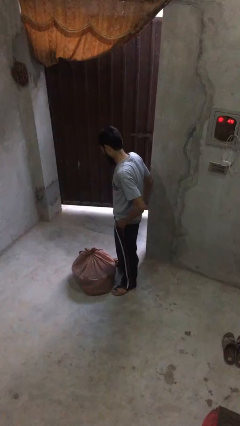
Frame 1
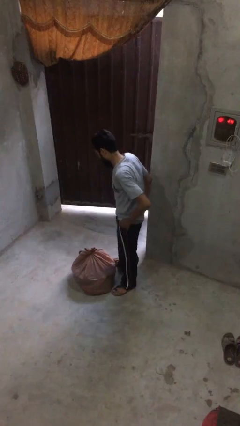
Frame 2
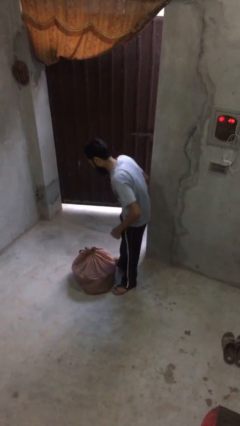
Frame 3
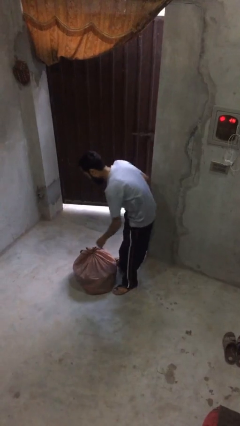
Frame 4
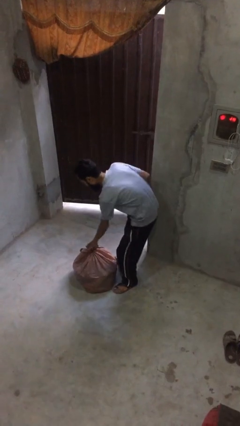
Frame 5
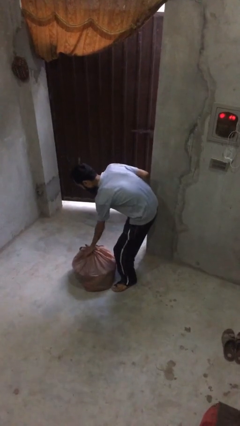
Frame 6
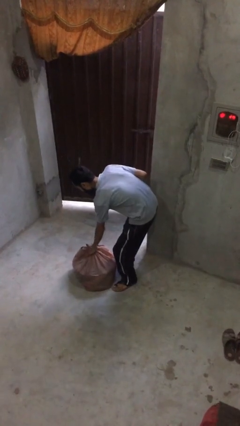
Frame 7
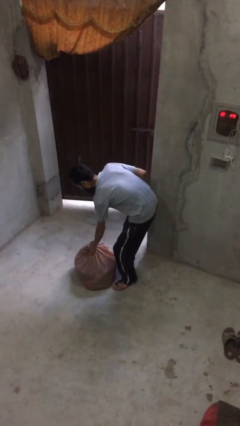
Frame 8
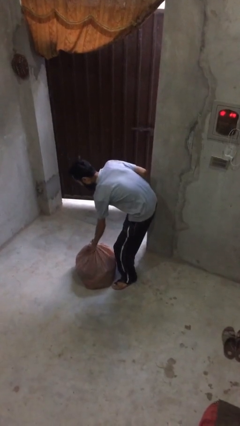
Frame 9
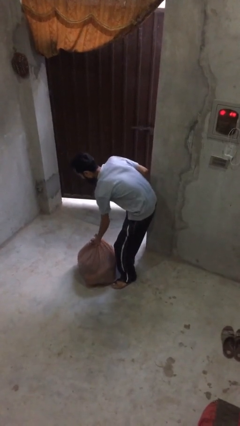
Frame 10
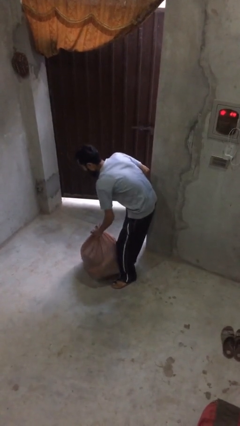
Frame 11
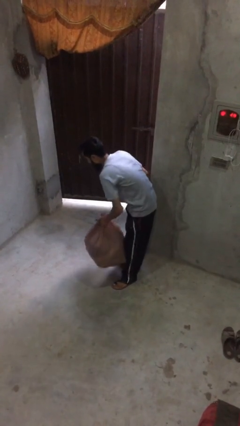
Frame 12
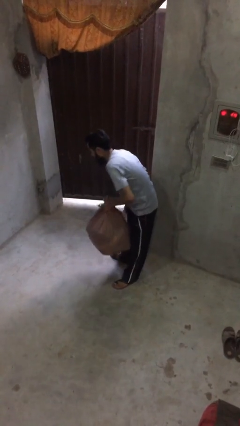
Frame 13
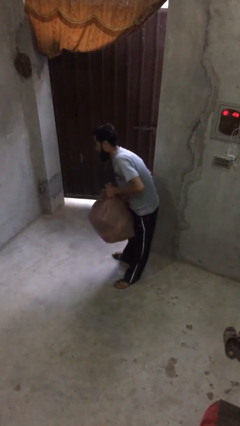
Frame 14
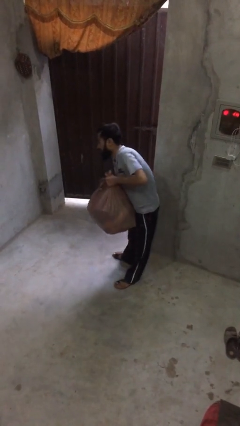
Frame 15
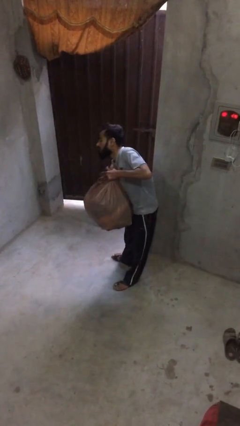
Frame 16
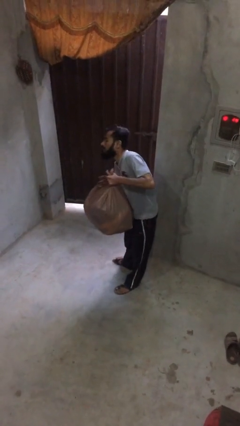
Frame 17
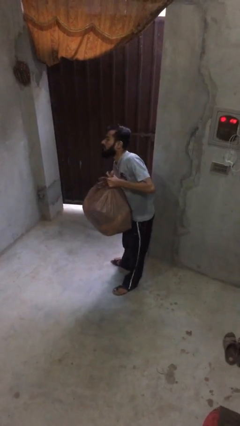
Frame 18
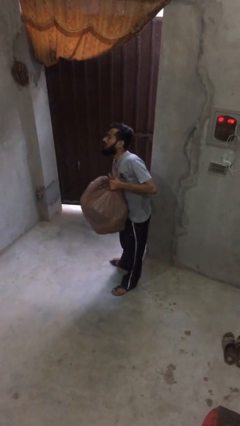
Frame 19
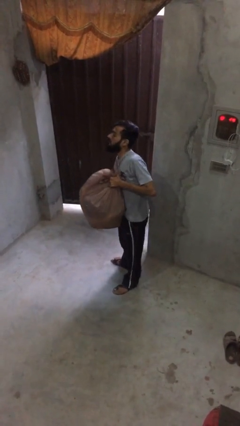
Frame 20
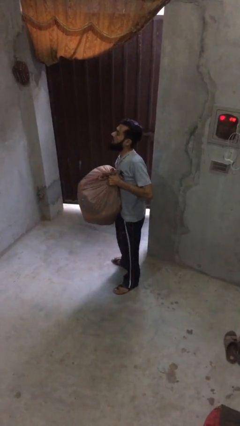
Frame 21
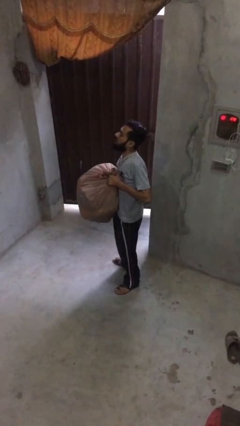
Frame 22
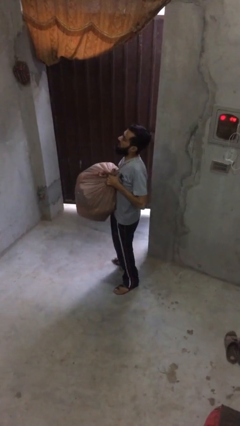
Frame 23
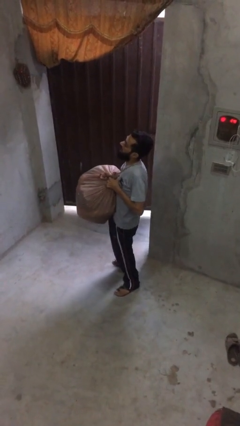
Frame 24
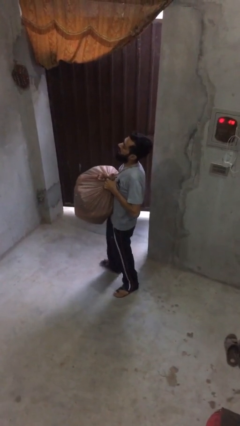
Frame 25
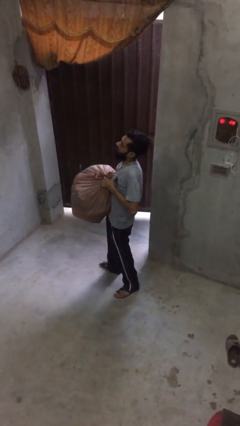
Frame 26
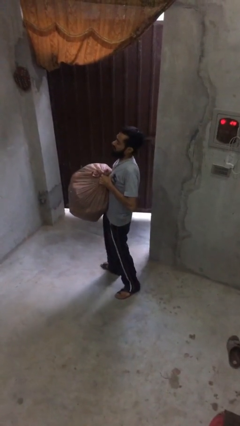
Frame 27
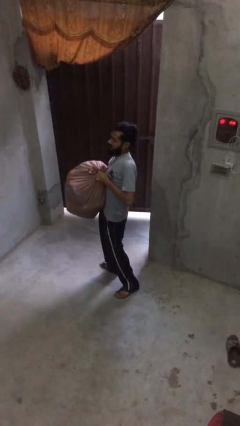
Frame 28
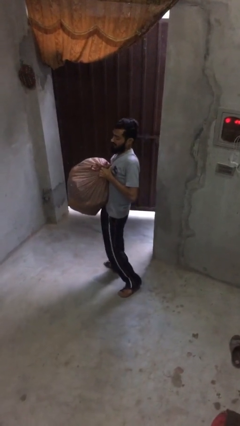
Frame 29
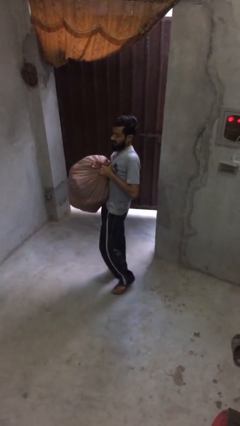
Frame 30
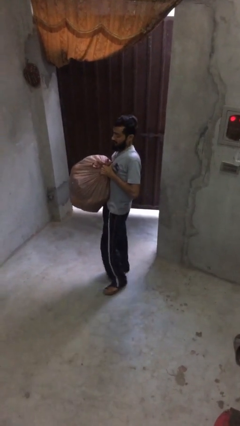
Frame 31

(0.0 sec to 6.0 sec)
person carries heavy object

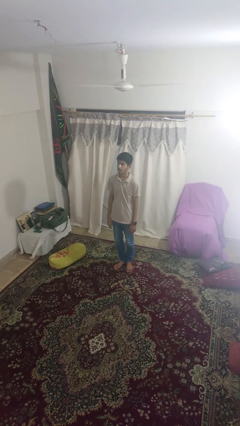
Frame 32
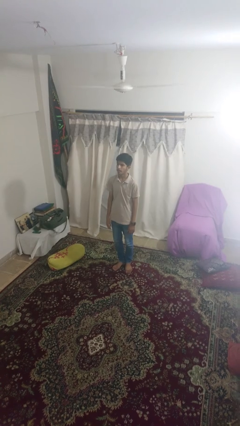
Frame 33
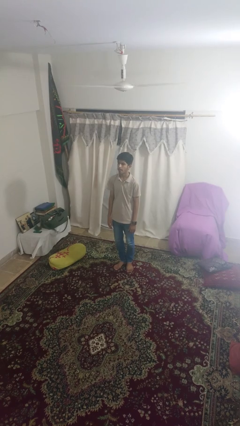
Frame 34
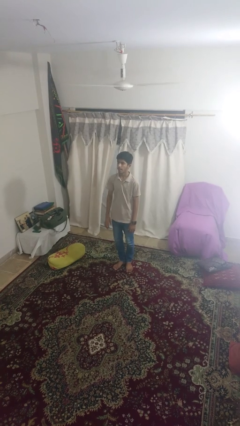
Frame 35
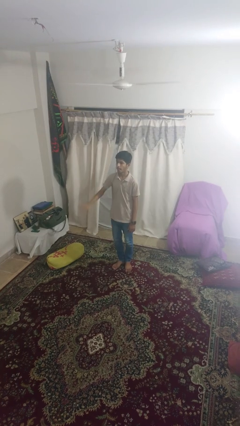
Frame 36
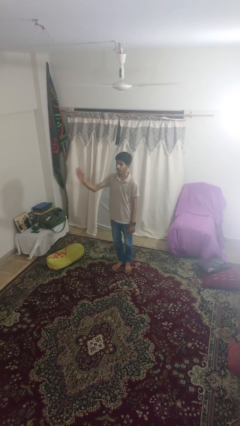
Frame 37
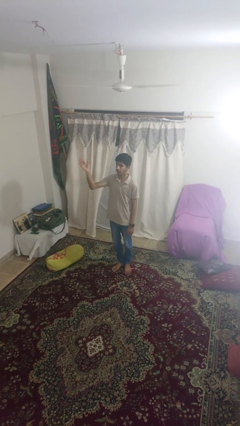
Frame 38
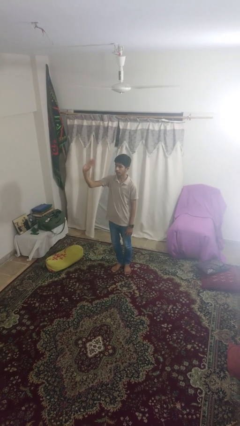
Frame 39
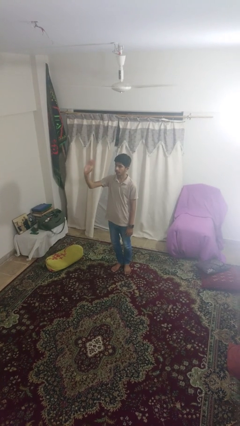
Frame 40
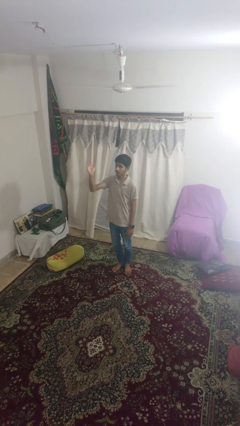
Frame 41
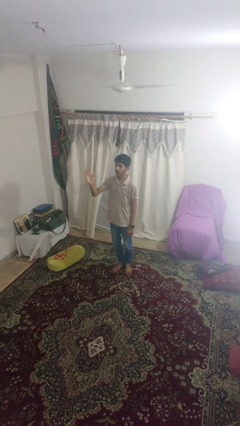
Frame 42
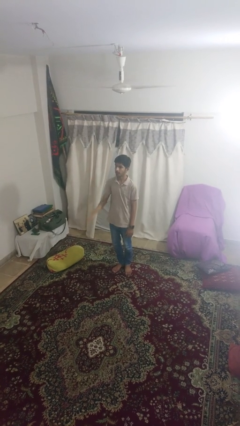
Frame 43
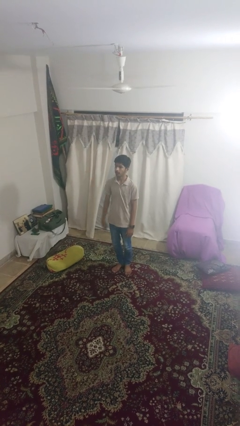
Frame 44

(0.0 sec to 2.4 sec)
person waves at person

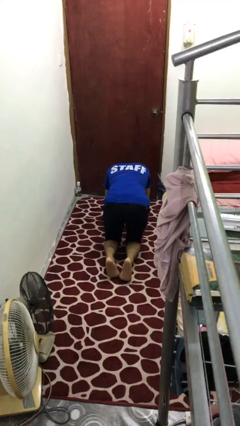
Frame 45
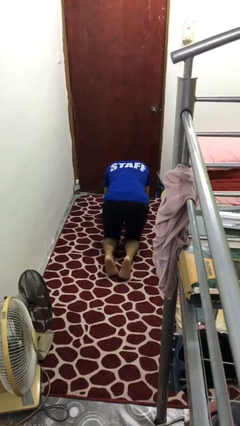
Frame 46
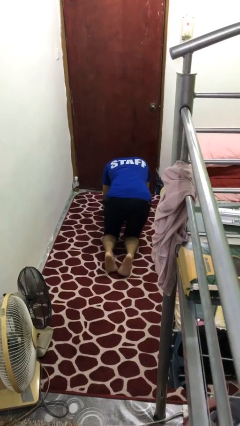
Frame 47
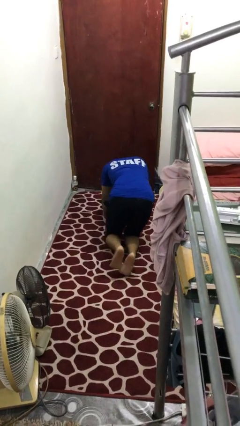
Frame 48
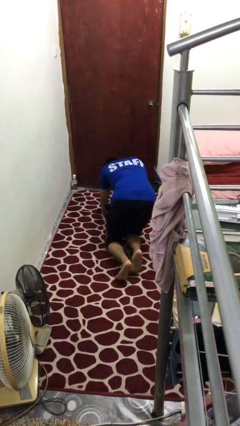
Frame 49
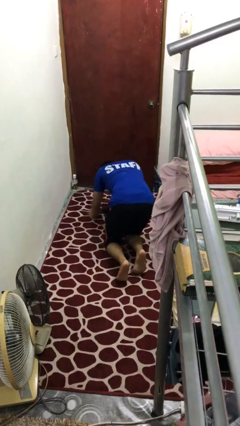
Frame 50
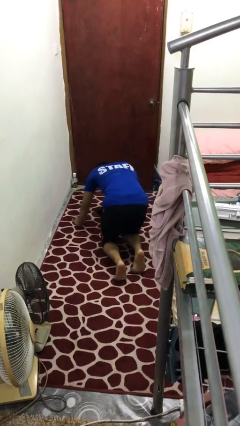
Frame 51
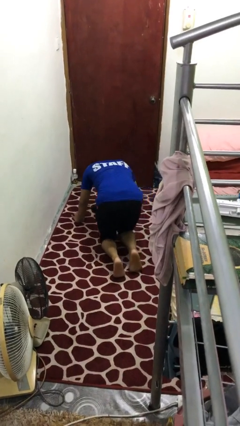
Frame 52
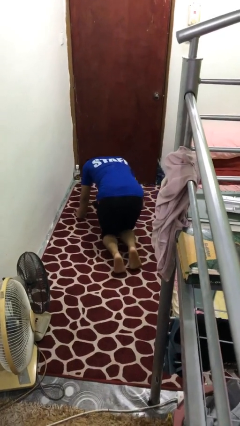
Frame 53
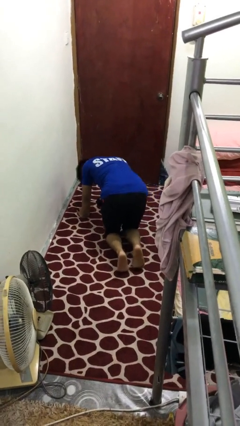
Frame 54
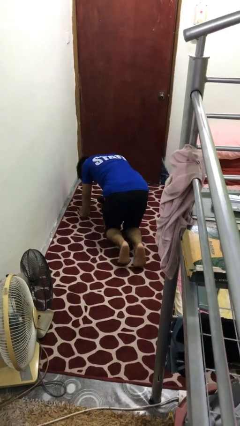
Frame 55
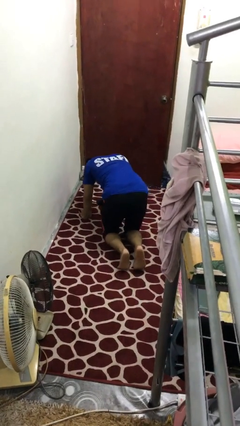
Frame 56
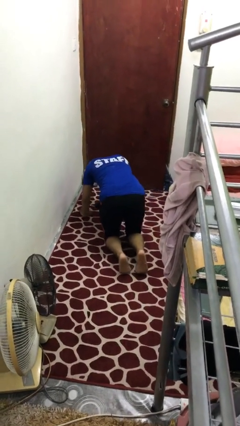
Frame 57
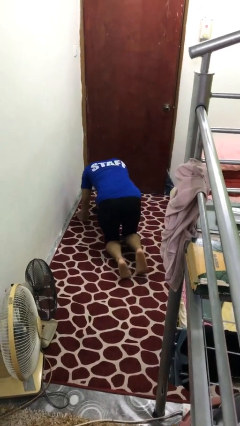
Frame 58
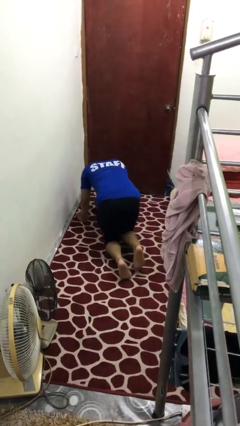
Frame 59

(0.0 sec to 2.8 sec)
person crawls

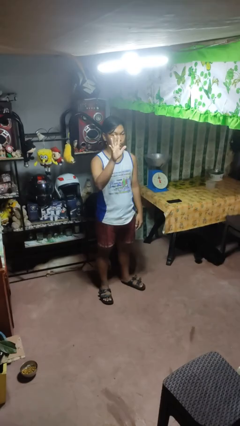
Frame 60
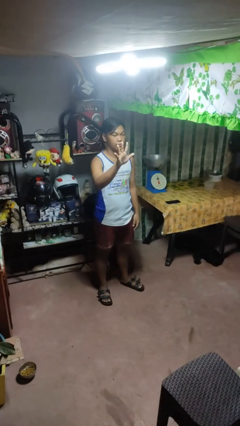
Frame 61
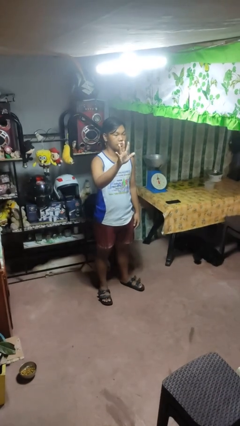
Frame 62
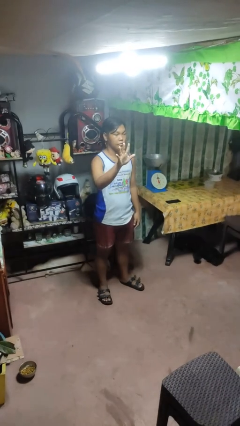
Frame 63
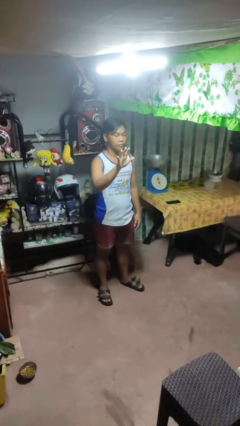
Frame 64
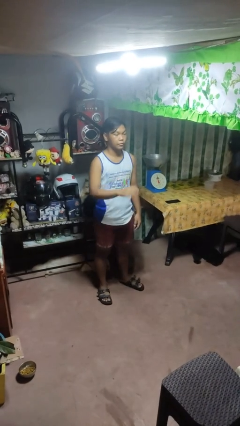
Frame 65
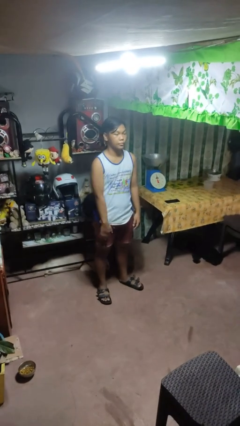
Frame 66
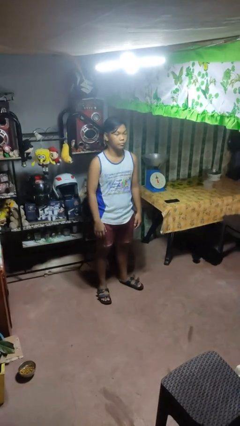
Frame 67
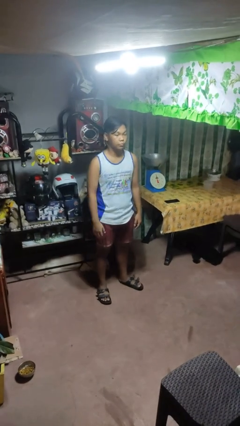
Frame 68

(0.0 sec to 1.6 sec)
person gestures number five

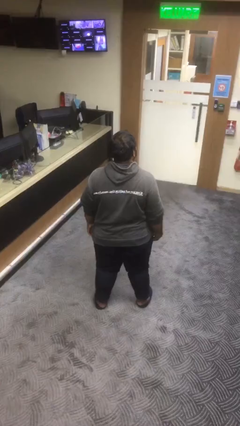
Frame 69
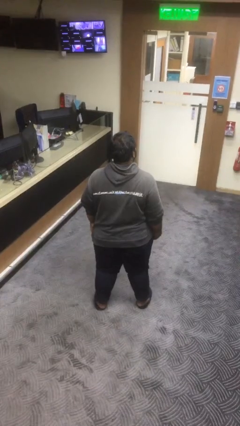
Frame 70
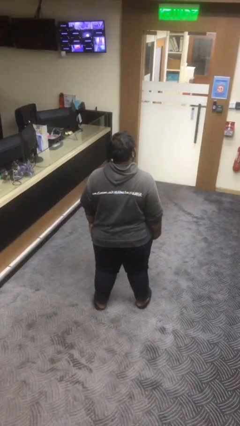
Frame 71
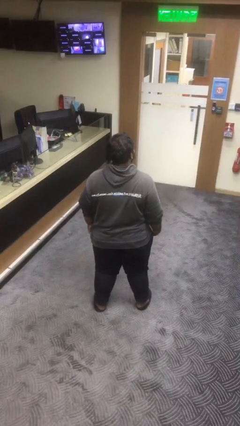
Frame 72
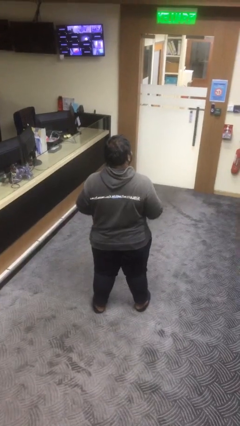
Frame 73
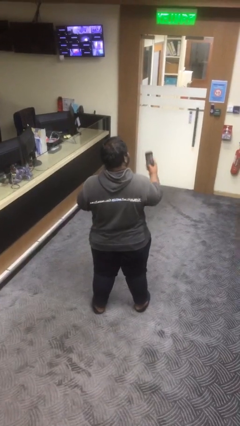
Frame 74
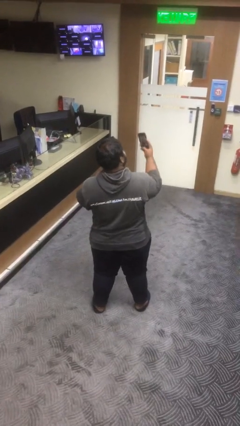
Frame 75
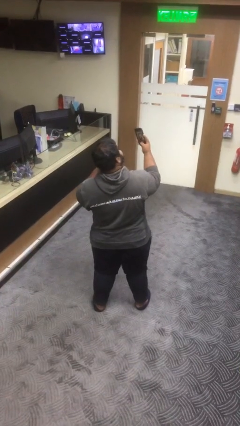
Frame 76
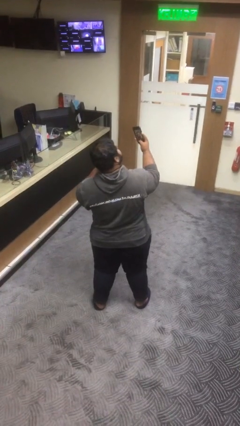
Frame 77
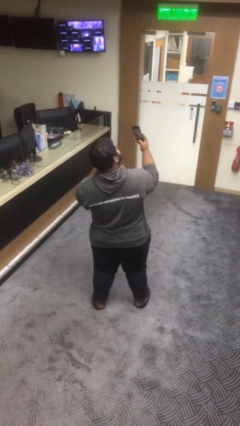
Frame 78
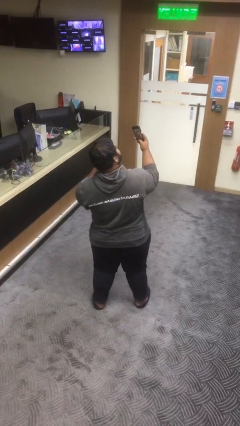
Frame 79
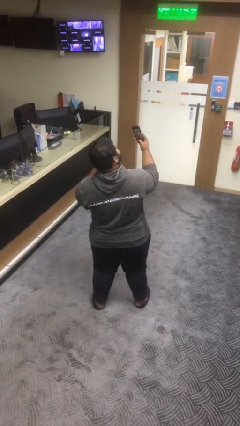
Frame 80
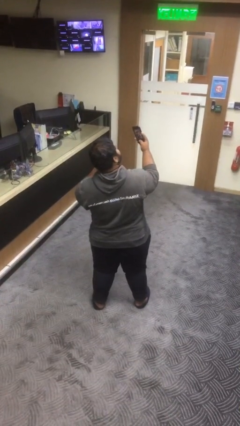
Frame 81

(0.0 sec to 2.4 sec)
person takes selfie

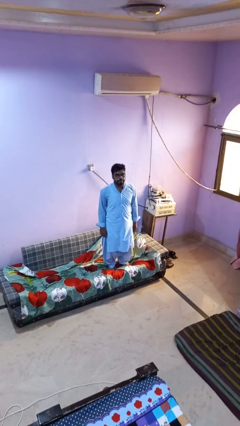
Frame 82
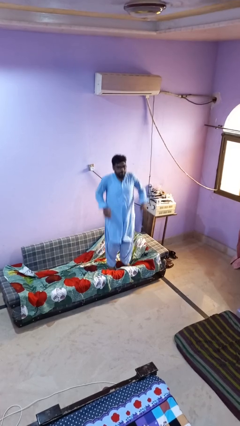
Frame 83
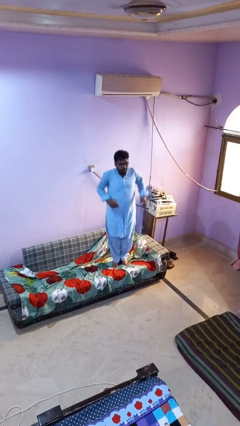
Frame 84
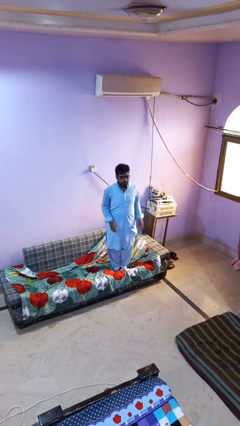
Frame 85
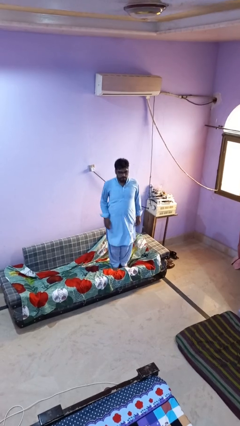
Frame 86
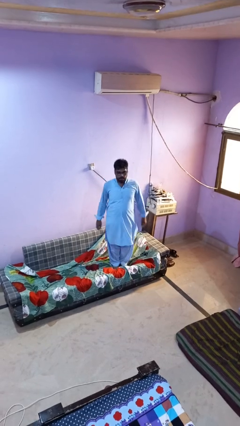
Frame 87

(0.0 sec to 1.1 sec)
person jumps on couch

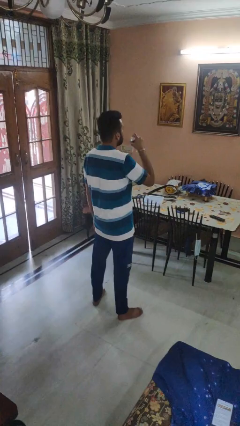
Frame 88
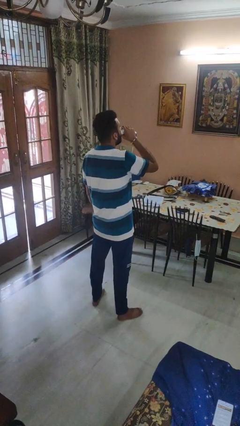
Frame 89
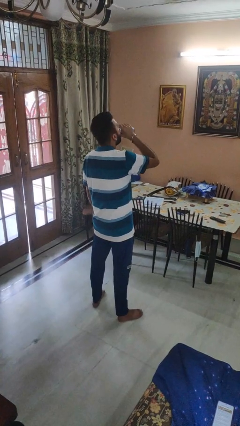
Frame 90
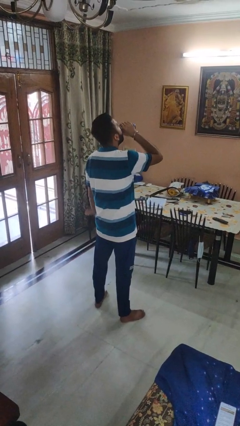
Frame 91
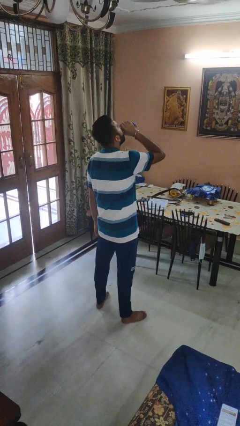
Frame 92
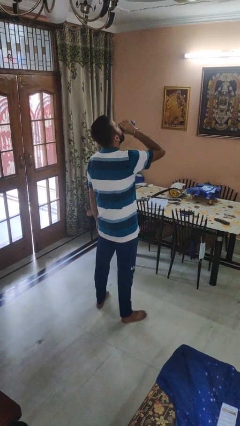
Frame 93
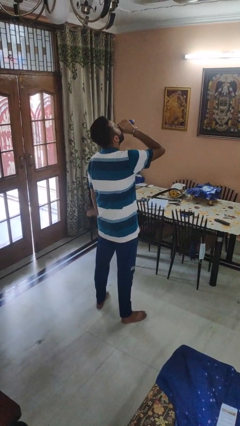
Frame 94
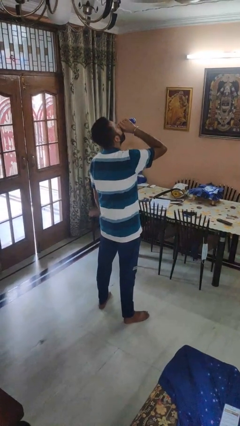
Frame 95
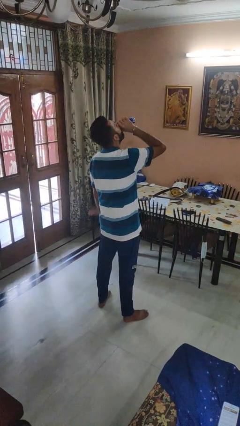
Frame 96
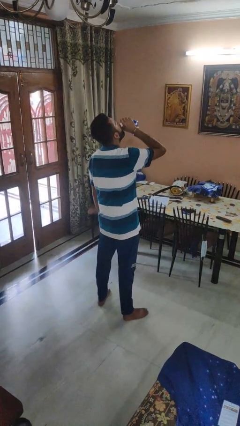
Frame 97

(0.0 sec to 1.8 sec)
person drinks from beverage can
